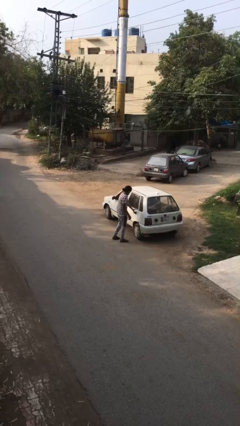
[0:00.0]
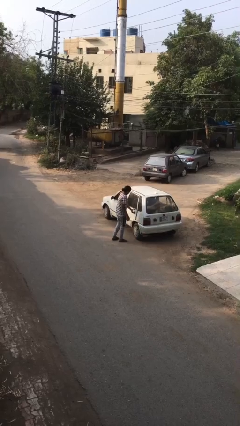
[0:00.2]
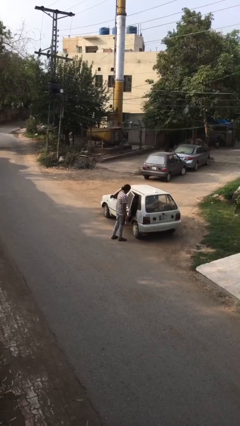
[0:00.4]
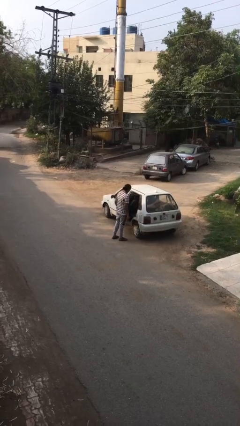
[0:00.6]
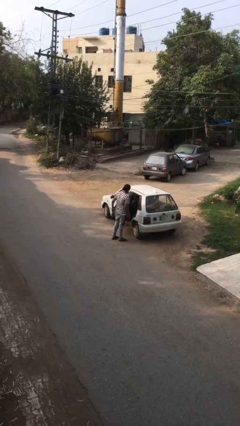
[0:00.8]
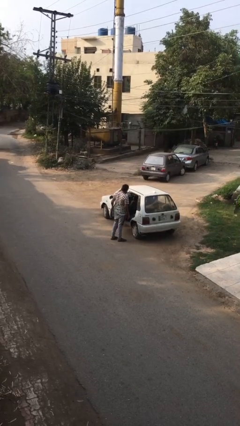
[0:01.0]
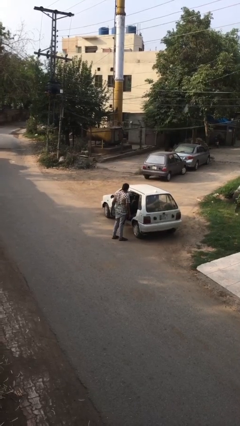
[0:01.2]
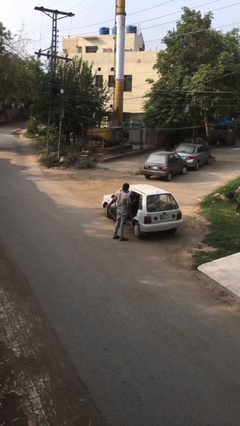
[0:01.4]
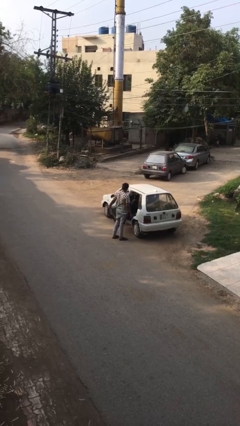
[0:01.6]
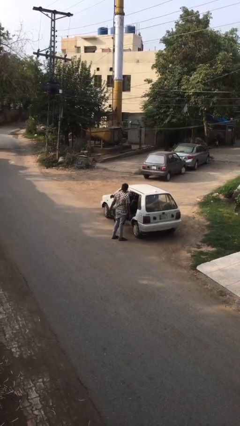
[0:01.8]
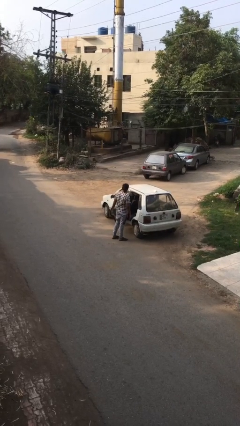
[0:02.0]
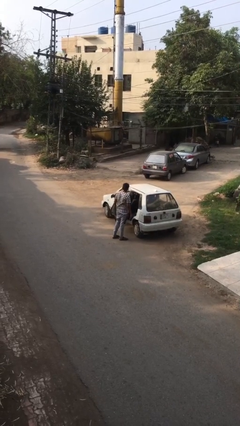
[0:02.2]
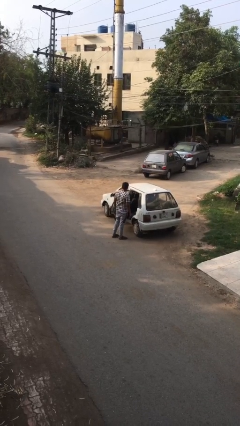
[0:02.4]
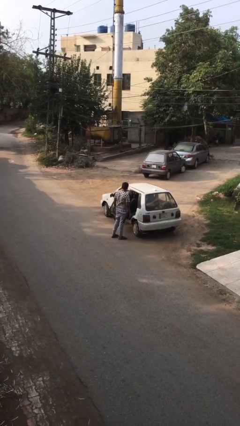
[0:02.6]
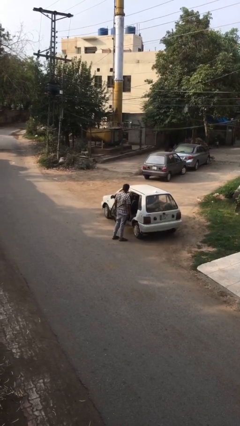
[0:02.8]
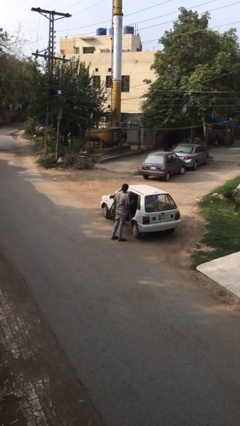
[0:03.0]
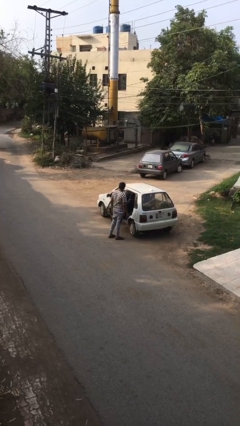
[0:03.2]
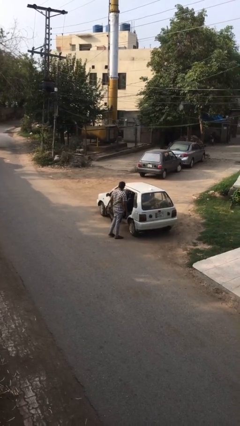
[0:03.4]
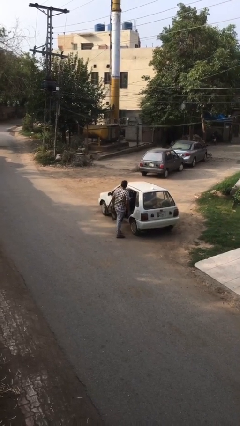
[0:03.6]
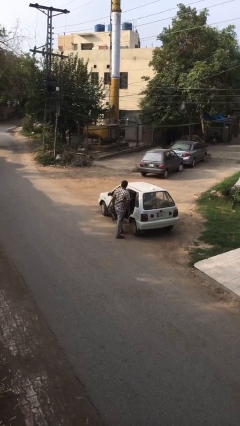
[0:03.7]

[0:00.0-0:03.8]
person opens car door

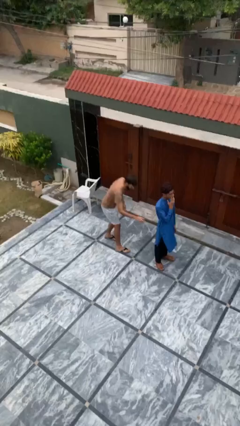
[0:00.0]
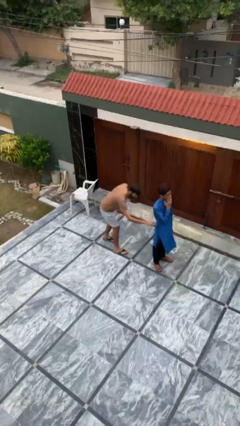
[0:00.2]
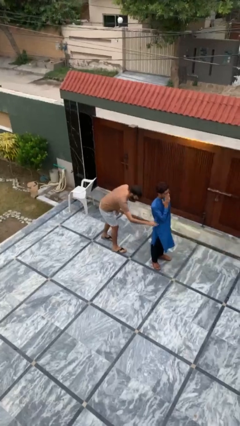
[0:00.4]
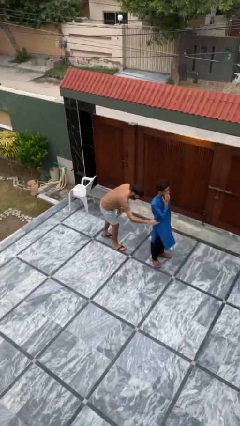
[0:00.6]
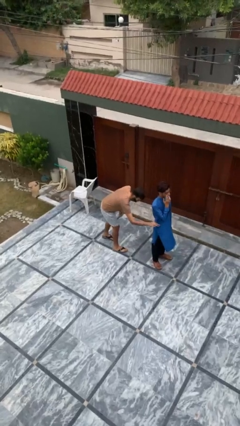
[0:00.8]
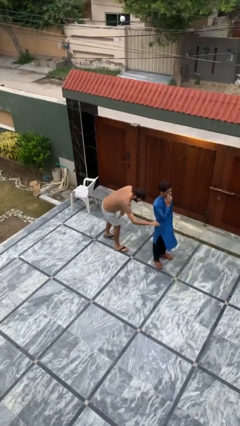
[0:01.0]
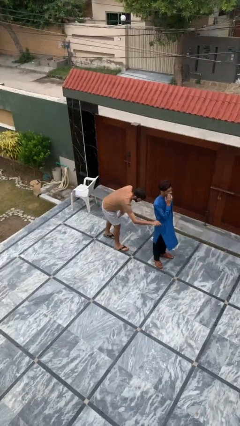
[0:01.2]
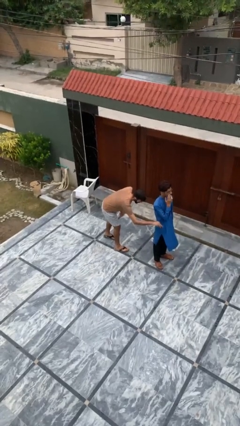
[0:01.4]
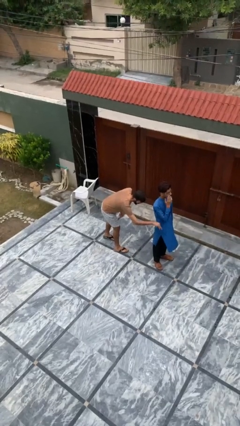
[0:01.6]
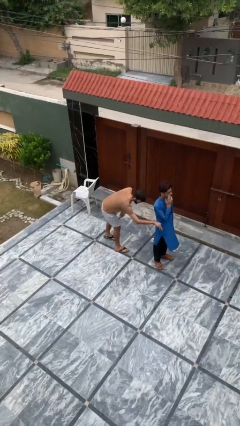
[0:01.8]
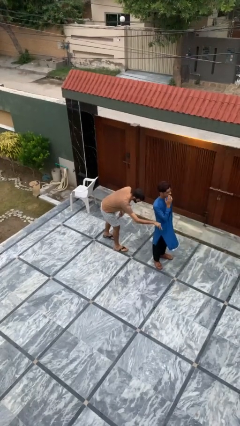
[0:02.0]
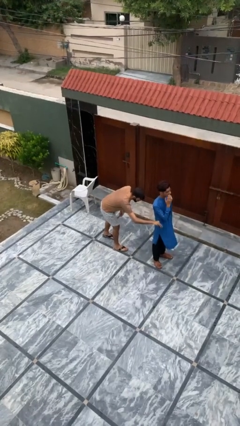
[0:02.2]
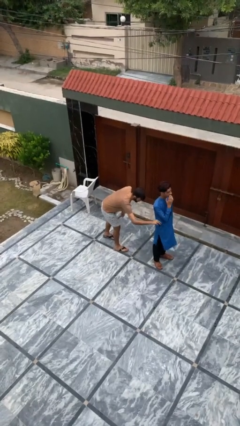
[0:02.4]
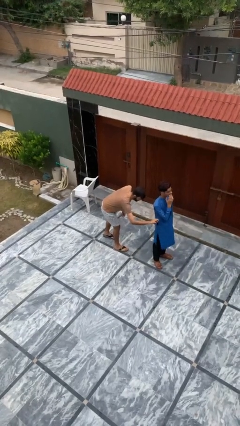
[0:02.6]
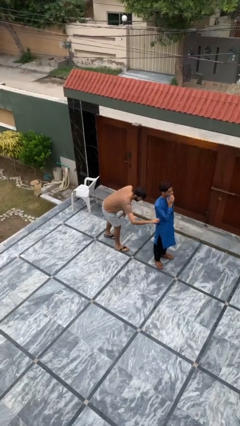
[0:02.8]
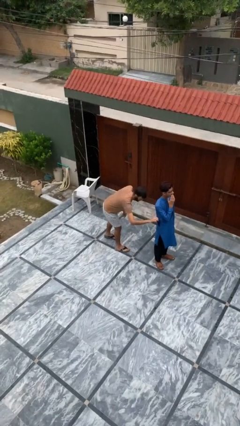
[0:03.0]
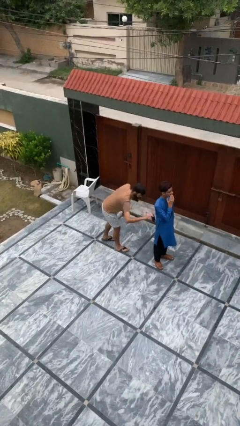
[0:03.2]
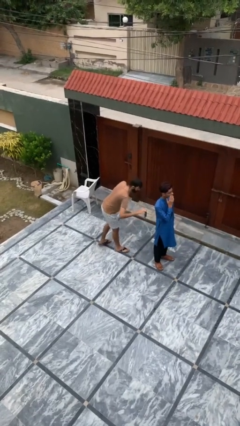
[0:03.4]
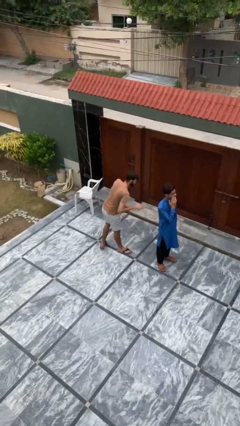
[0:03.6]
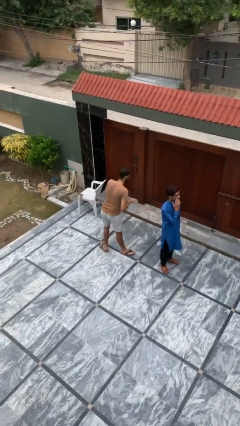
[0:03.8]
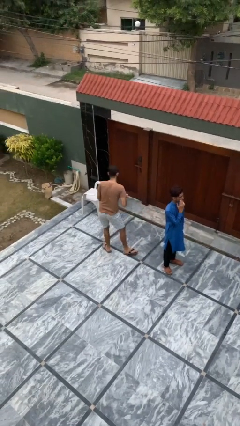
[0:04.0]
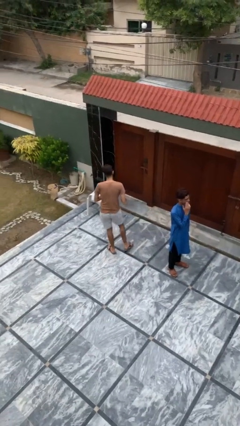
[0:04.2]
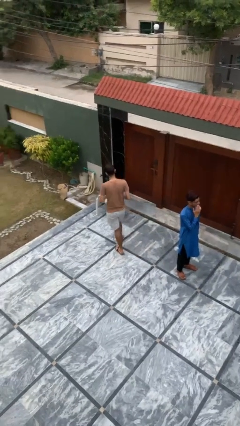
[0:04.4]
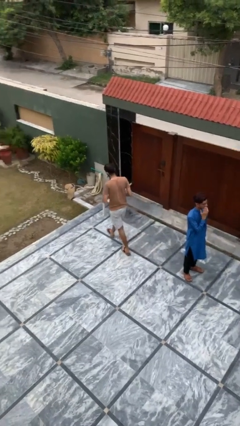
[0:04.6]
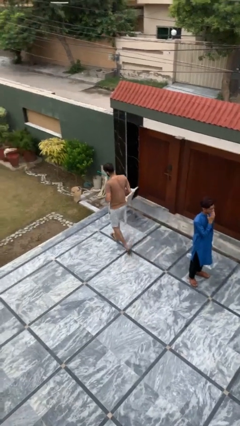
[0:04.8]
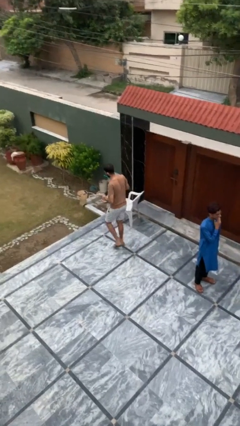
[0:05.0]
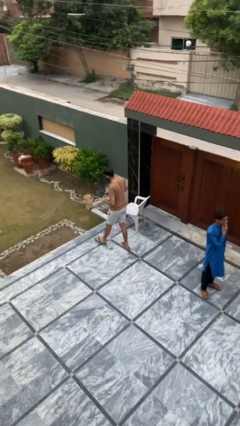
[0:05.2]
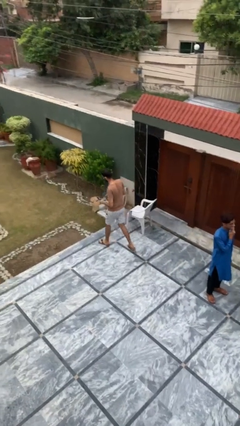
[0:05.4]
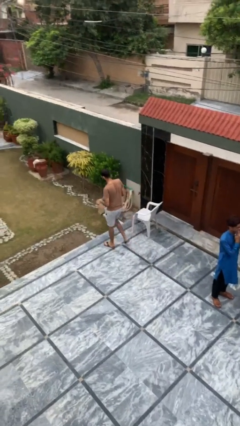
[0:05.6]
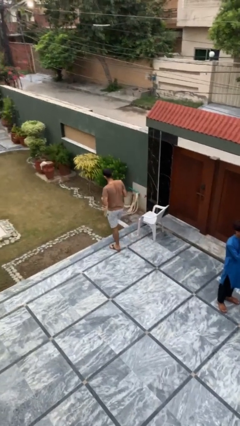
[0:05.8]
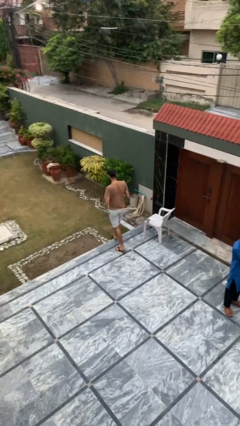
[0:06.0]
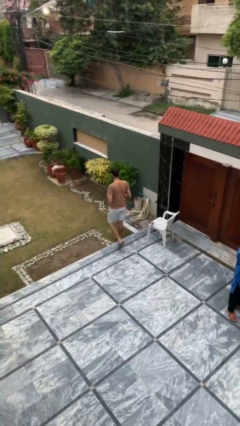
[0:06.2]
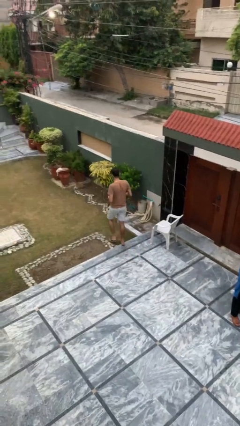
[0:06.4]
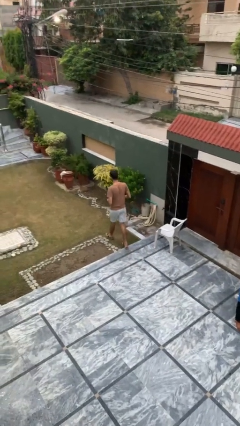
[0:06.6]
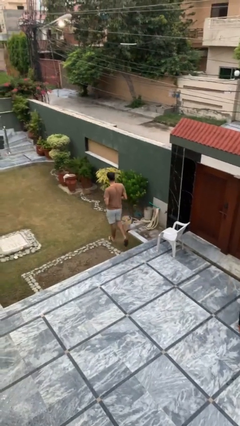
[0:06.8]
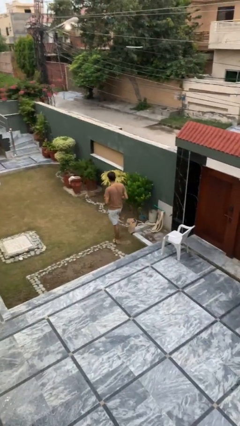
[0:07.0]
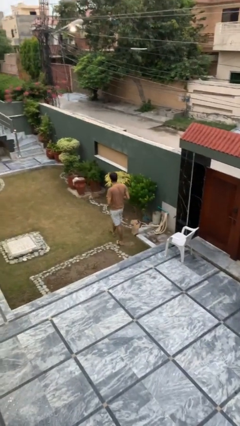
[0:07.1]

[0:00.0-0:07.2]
person steals object from person

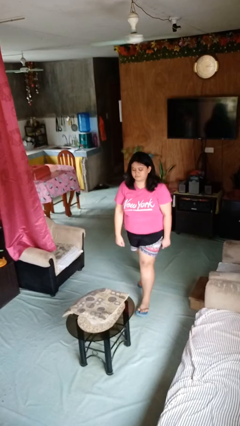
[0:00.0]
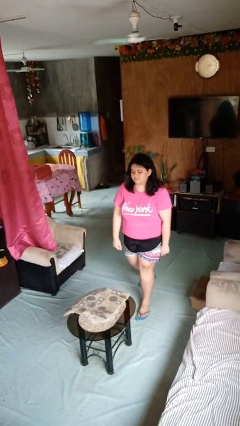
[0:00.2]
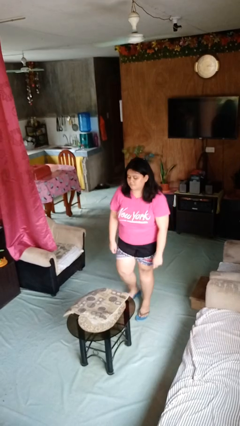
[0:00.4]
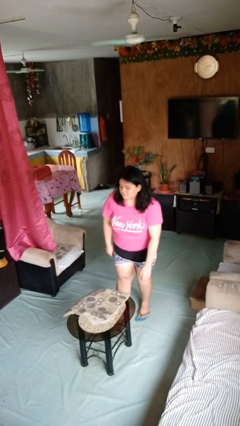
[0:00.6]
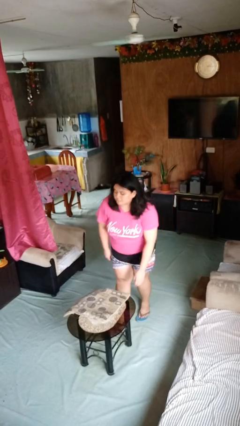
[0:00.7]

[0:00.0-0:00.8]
person picks up object from table

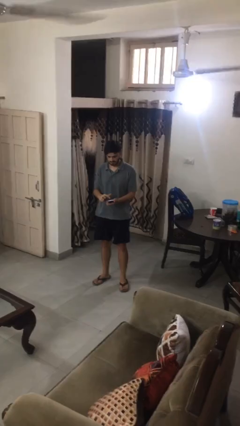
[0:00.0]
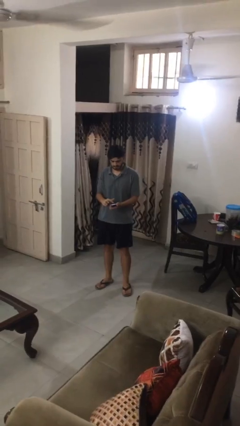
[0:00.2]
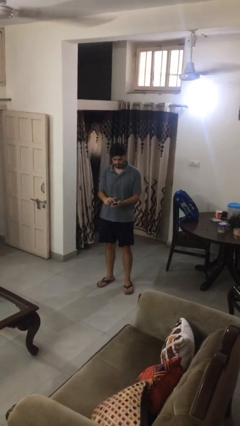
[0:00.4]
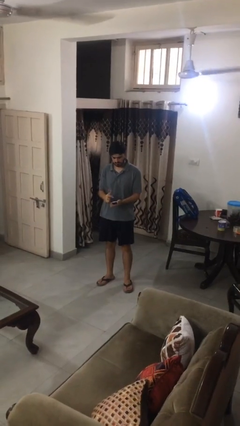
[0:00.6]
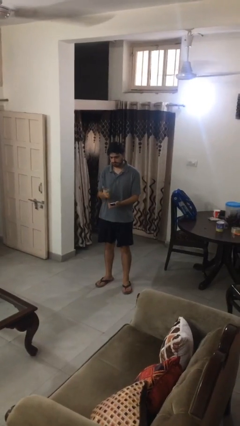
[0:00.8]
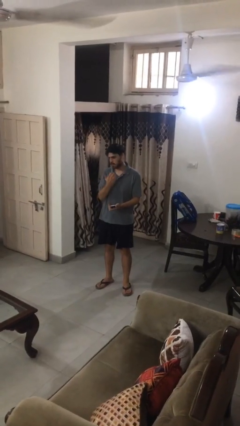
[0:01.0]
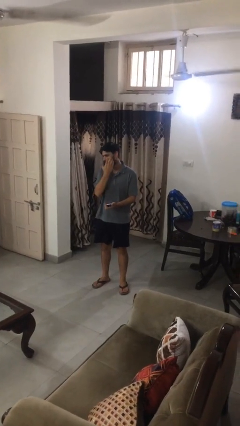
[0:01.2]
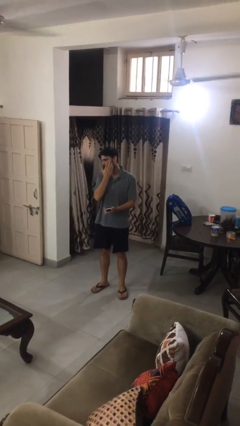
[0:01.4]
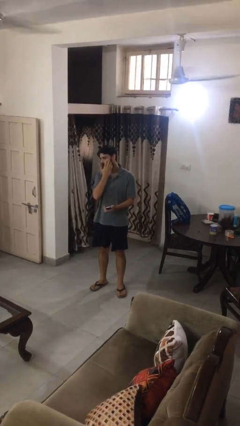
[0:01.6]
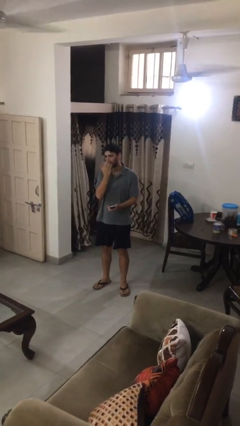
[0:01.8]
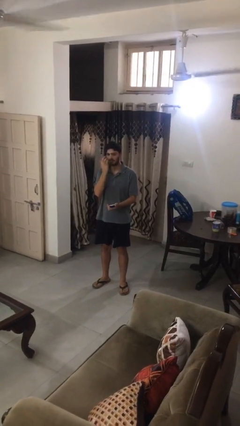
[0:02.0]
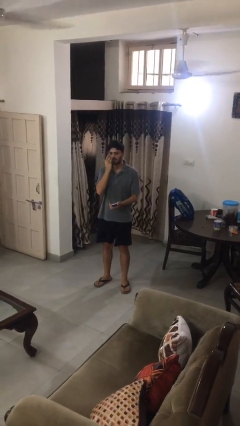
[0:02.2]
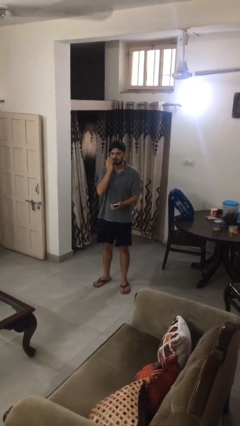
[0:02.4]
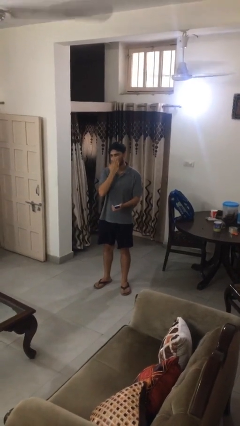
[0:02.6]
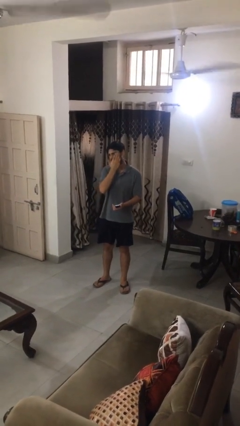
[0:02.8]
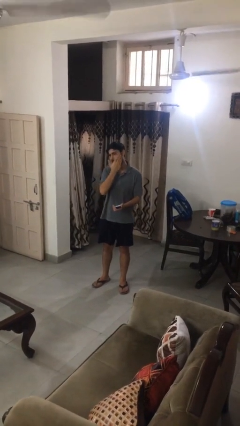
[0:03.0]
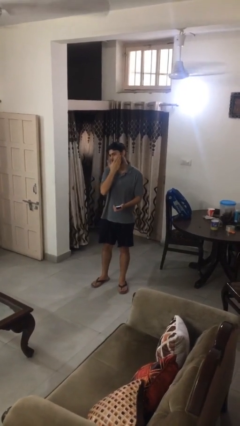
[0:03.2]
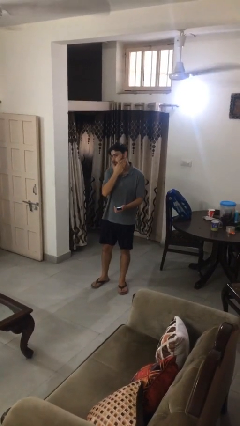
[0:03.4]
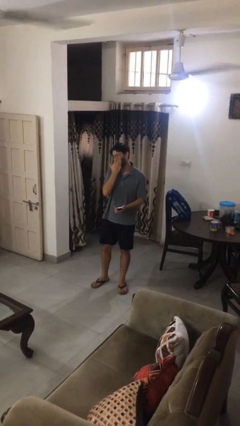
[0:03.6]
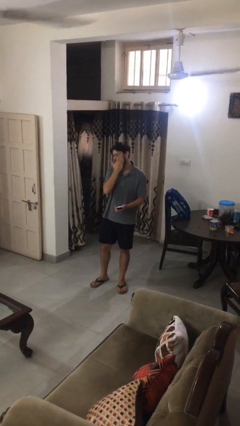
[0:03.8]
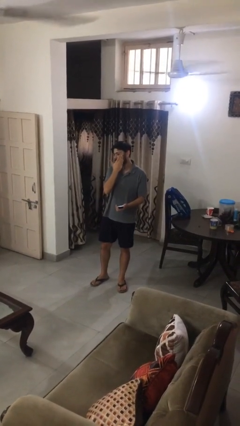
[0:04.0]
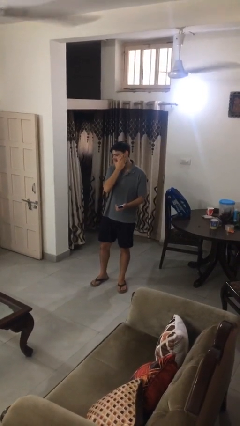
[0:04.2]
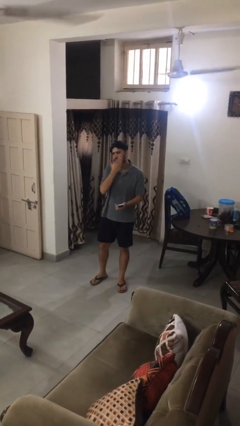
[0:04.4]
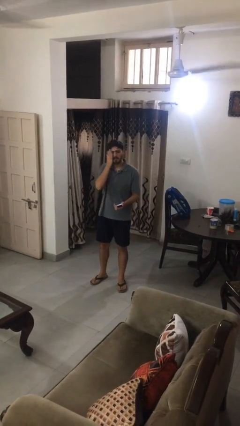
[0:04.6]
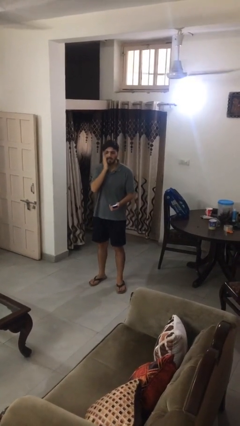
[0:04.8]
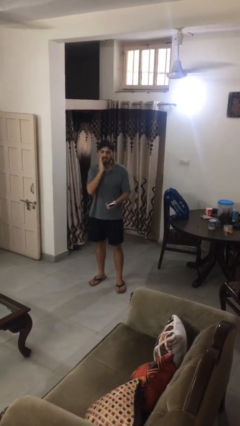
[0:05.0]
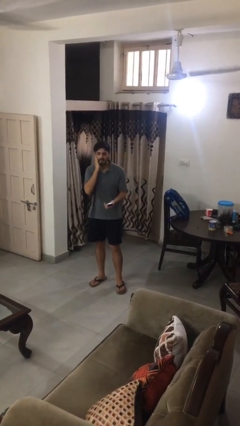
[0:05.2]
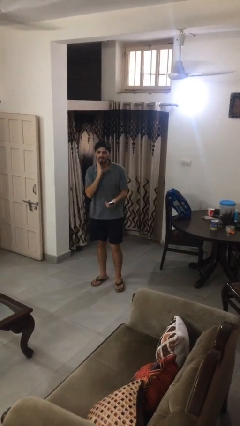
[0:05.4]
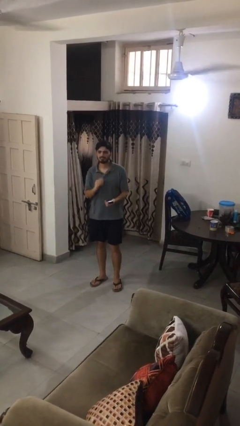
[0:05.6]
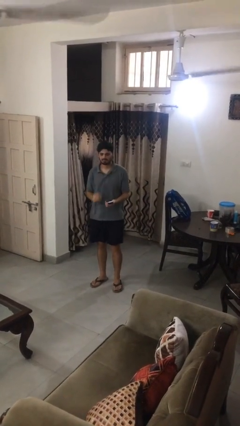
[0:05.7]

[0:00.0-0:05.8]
person applies facial moisturizer

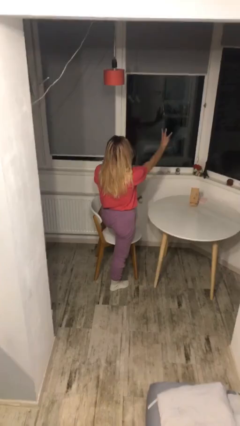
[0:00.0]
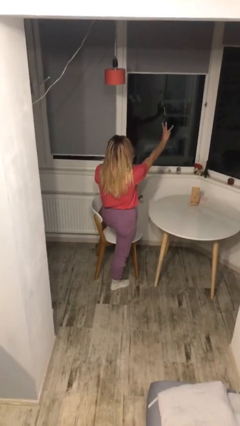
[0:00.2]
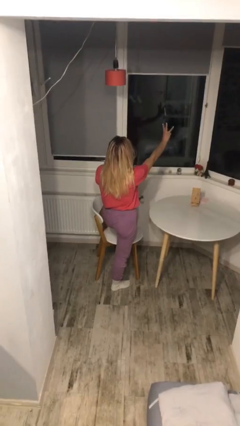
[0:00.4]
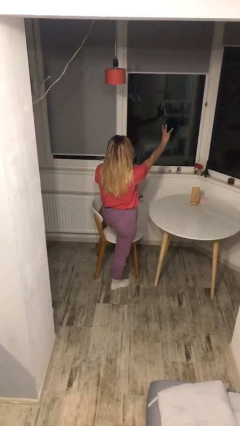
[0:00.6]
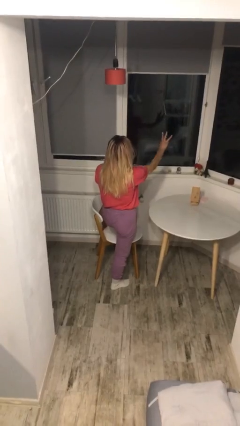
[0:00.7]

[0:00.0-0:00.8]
person gestures number three
